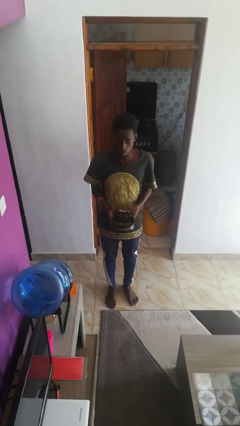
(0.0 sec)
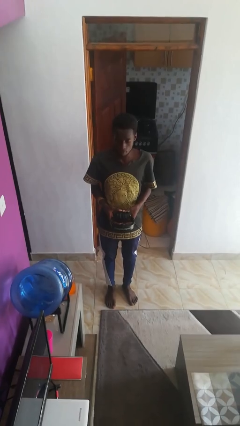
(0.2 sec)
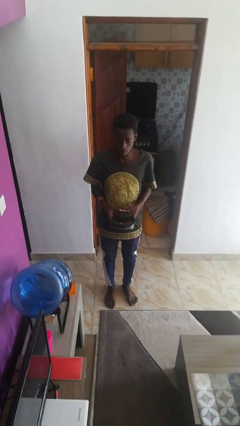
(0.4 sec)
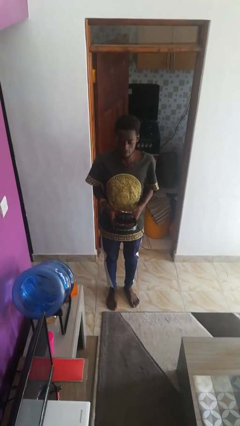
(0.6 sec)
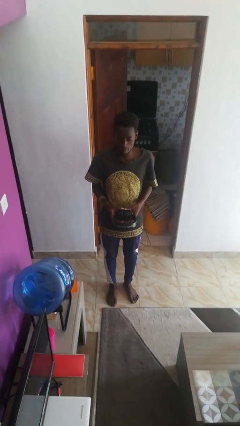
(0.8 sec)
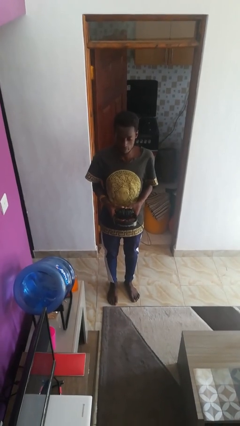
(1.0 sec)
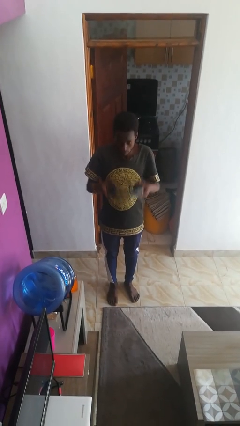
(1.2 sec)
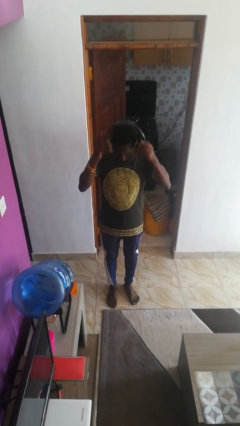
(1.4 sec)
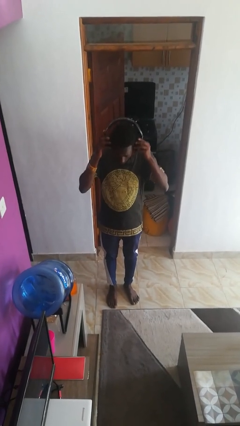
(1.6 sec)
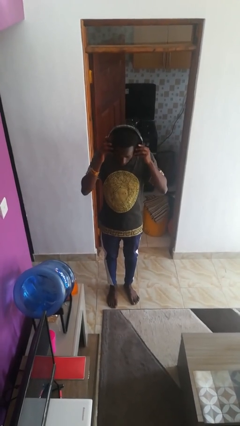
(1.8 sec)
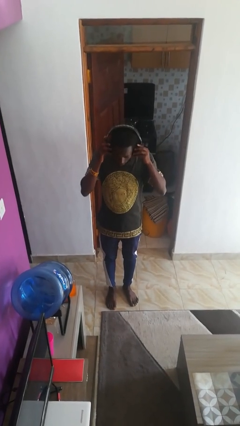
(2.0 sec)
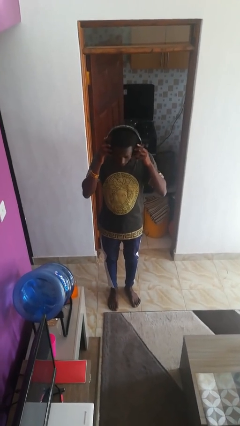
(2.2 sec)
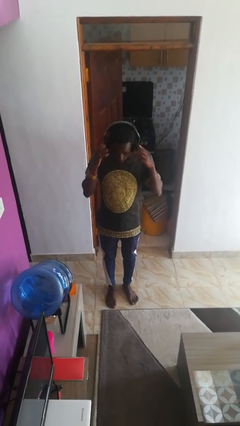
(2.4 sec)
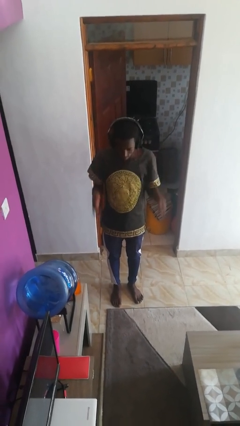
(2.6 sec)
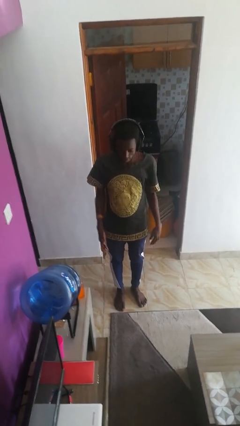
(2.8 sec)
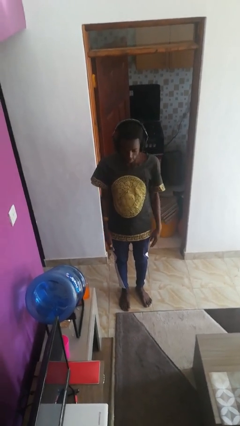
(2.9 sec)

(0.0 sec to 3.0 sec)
person puts on headphones

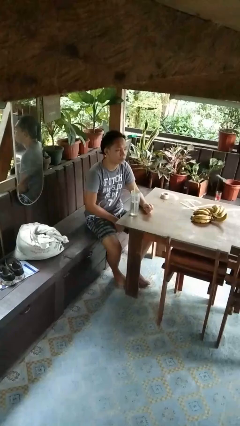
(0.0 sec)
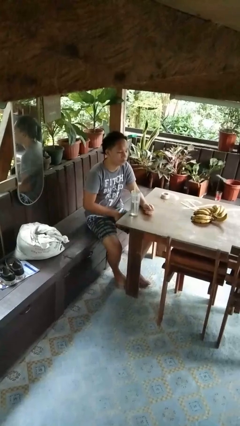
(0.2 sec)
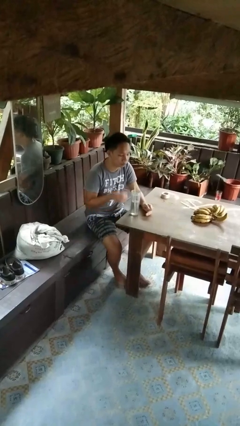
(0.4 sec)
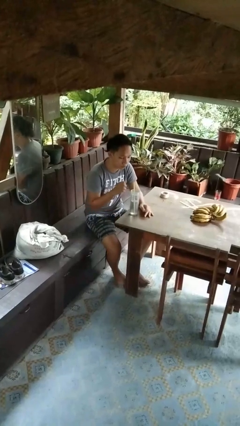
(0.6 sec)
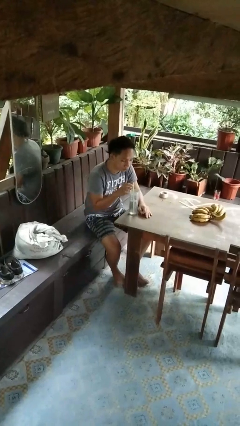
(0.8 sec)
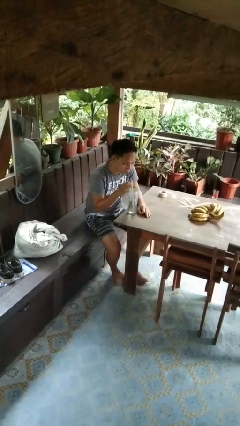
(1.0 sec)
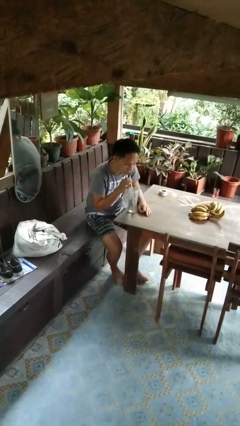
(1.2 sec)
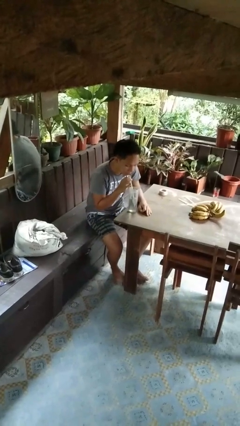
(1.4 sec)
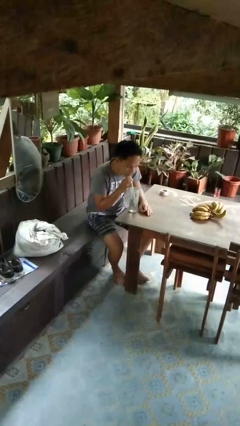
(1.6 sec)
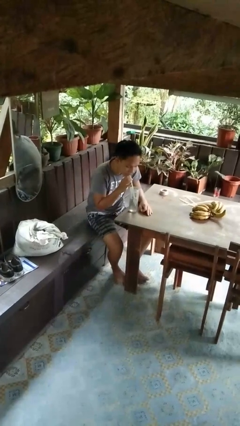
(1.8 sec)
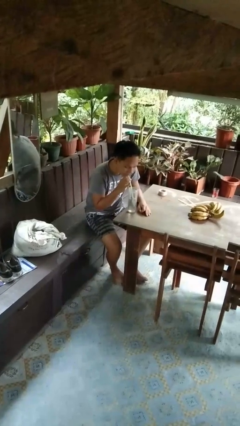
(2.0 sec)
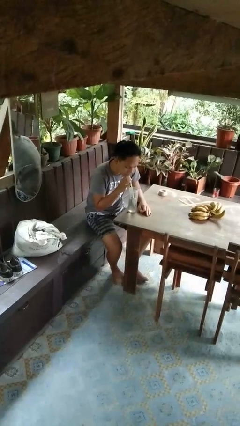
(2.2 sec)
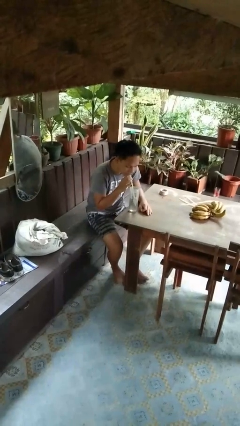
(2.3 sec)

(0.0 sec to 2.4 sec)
person drinks from straw

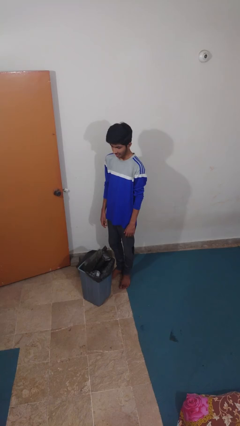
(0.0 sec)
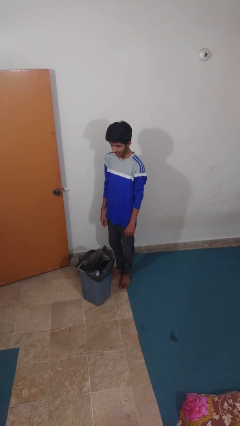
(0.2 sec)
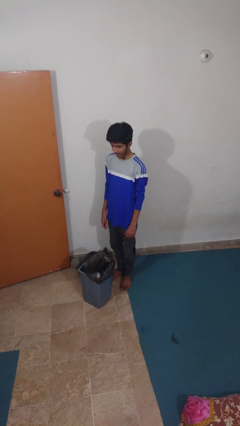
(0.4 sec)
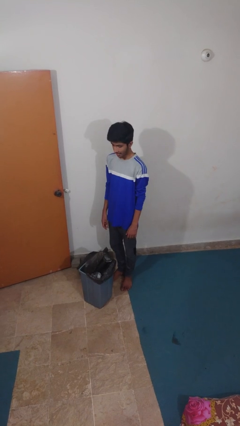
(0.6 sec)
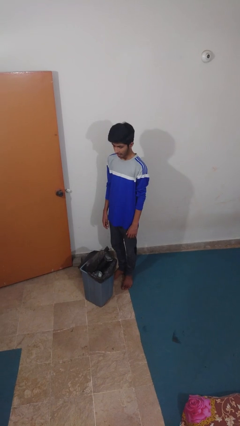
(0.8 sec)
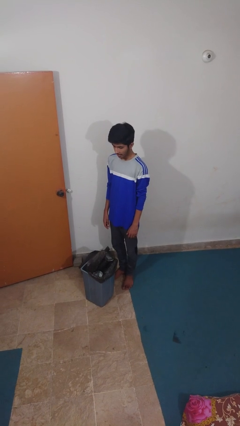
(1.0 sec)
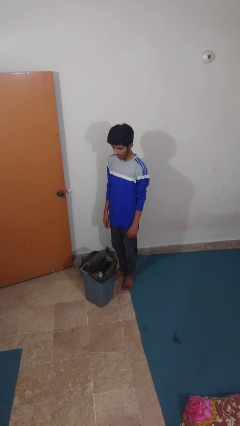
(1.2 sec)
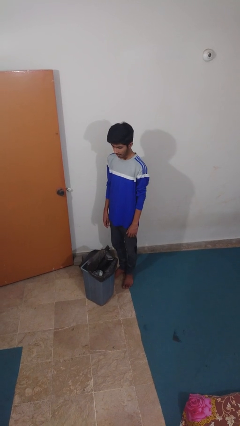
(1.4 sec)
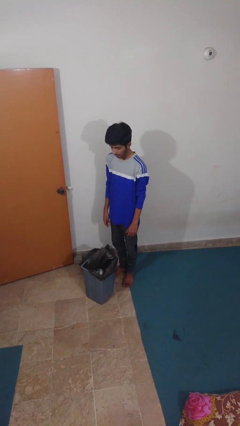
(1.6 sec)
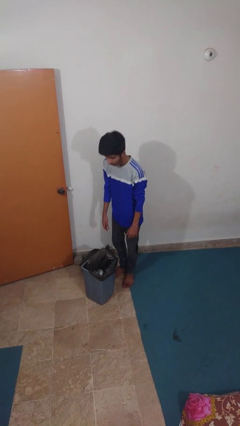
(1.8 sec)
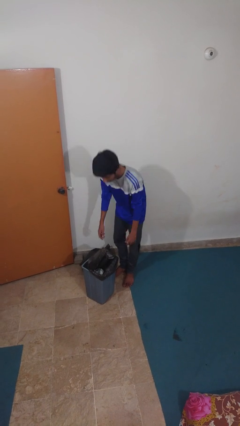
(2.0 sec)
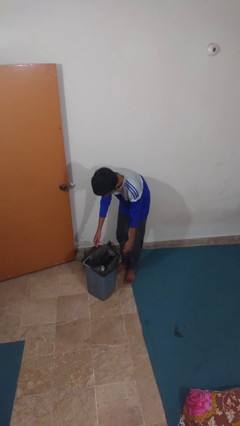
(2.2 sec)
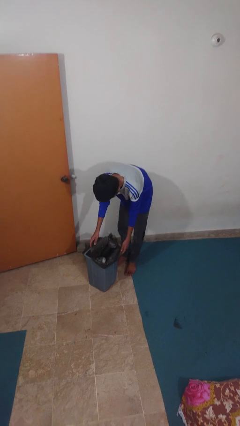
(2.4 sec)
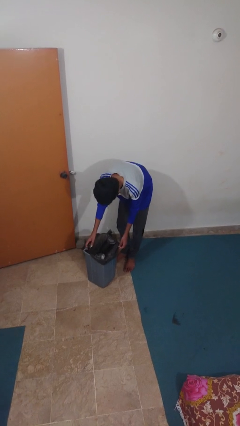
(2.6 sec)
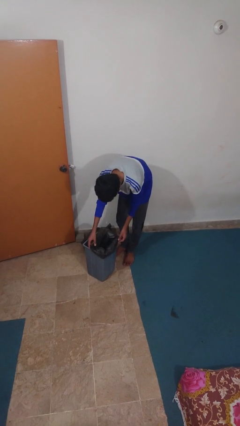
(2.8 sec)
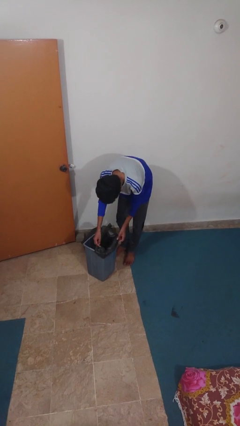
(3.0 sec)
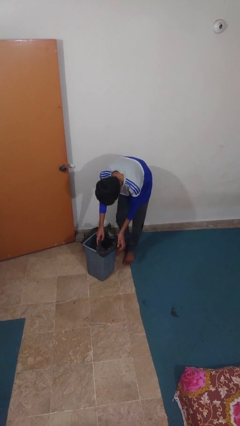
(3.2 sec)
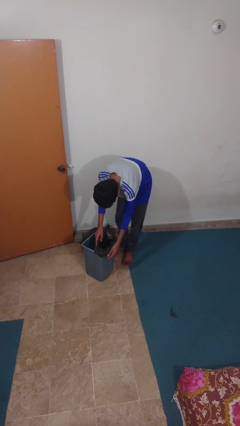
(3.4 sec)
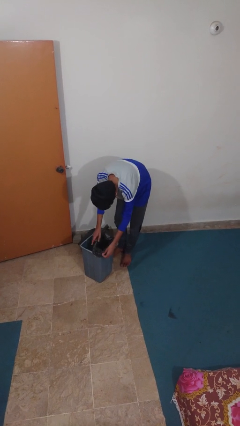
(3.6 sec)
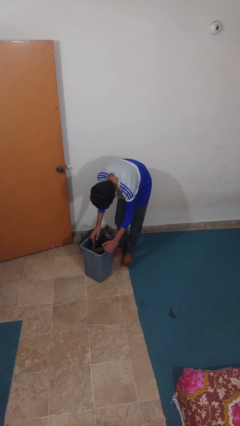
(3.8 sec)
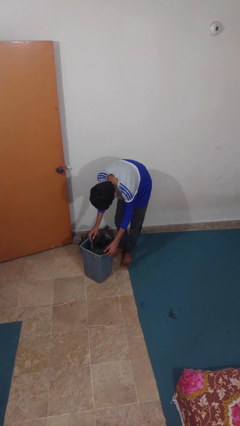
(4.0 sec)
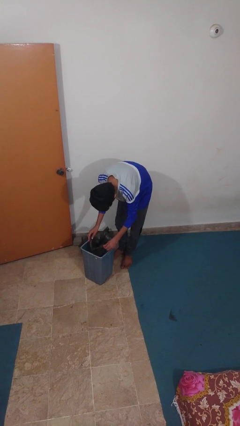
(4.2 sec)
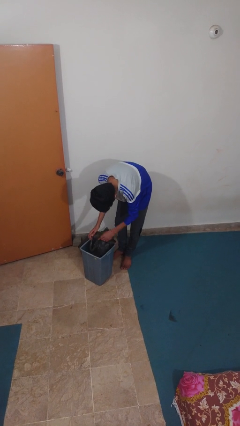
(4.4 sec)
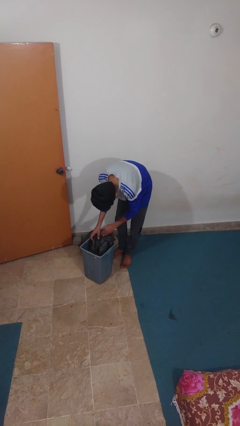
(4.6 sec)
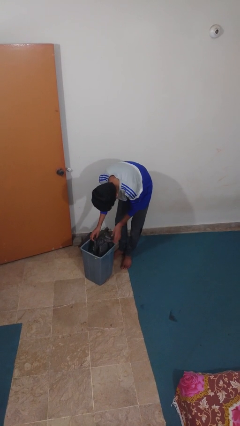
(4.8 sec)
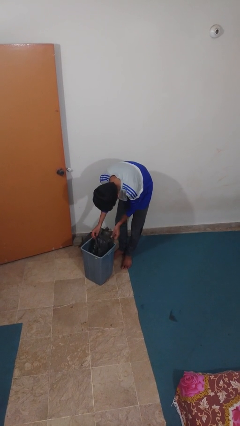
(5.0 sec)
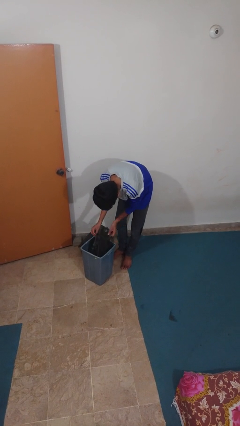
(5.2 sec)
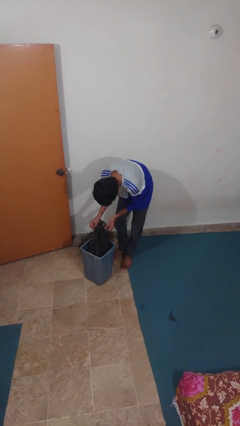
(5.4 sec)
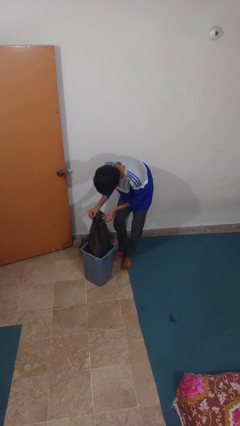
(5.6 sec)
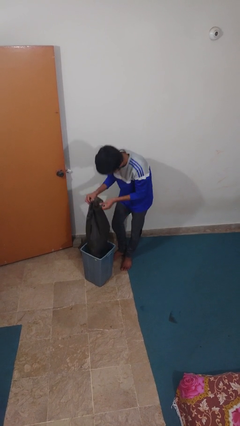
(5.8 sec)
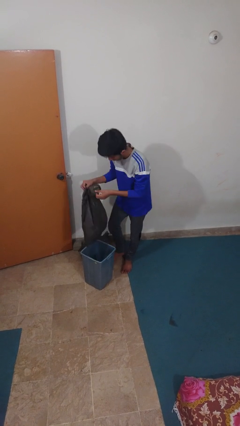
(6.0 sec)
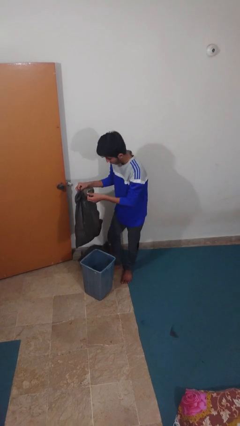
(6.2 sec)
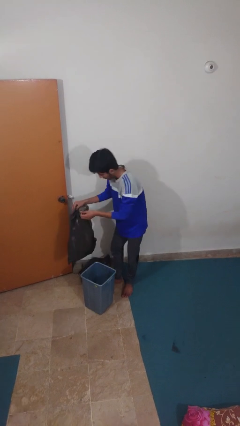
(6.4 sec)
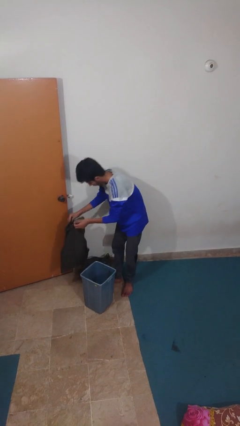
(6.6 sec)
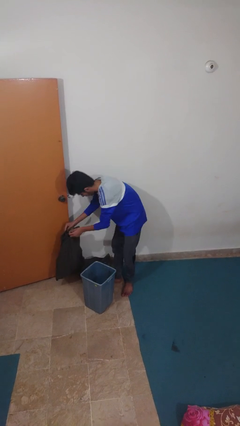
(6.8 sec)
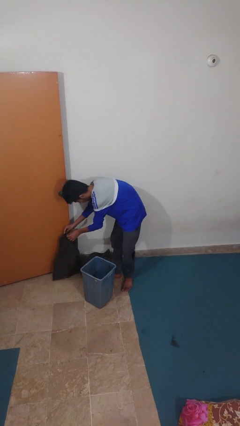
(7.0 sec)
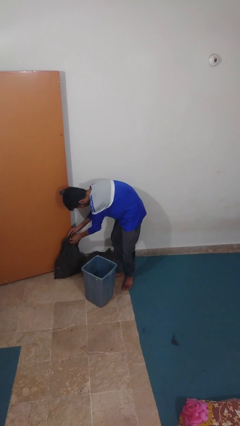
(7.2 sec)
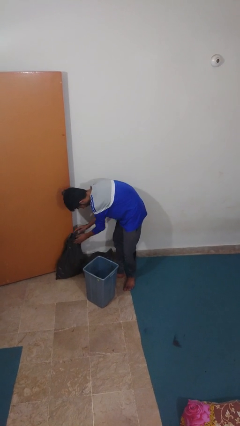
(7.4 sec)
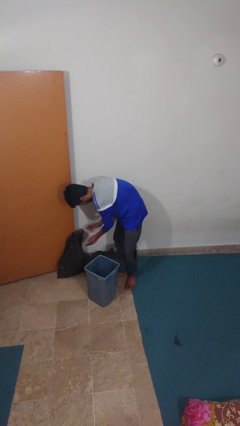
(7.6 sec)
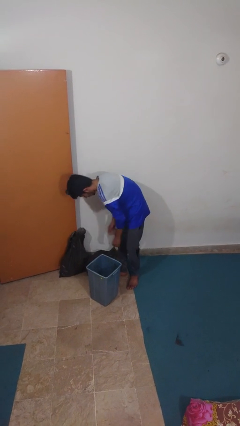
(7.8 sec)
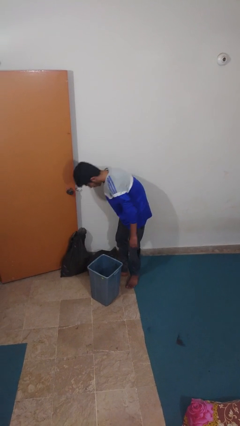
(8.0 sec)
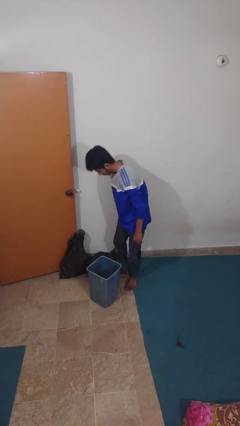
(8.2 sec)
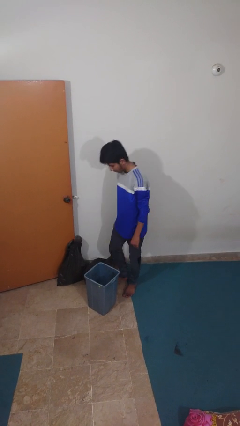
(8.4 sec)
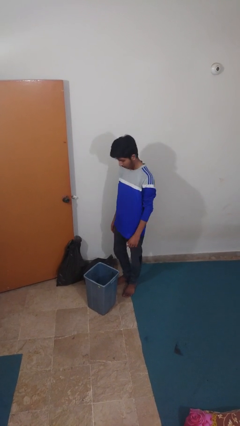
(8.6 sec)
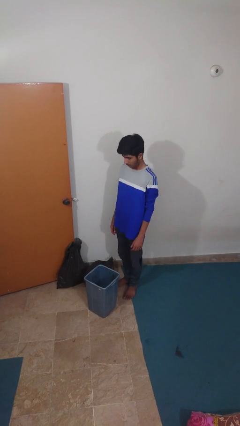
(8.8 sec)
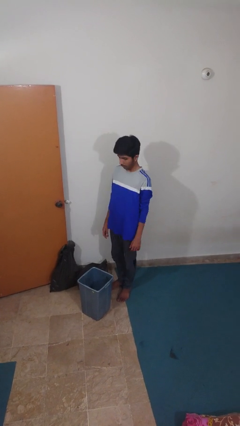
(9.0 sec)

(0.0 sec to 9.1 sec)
person removes trashbag from trashcan

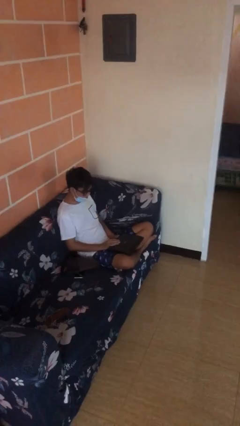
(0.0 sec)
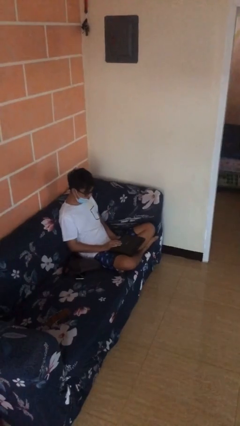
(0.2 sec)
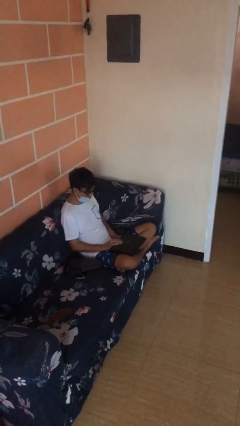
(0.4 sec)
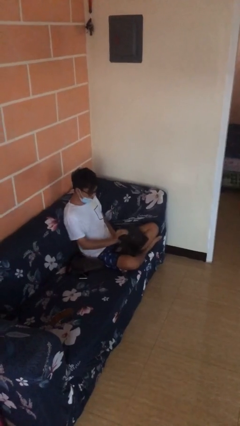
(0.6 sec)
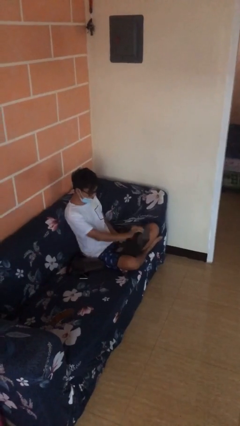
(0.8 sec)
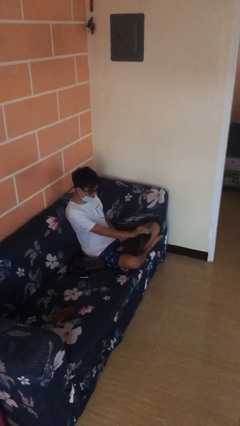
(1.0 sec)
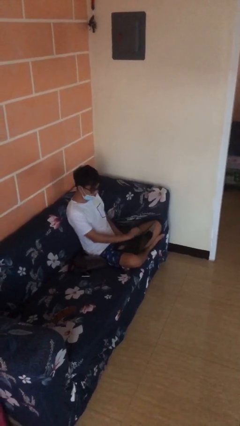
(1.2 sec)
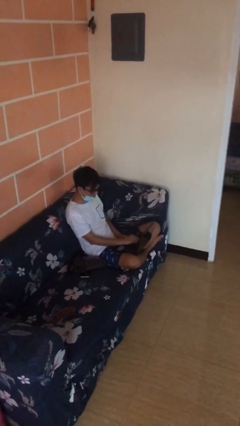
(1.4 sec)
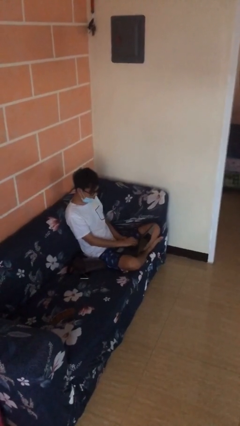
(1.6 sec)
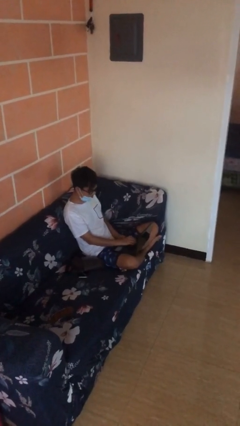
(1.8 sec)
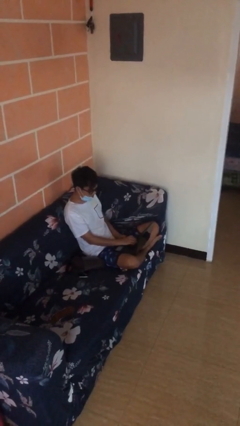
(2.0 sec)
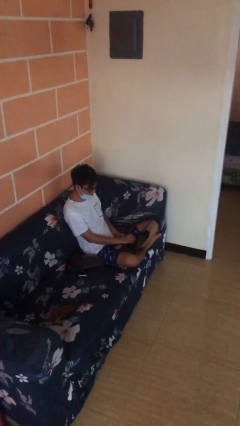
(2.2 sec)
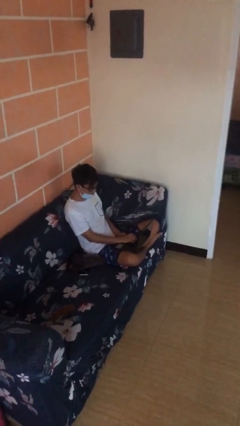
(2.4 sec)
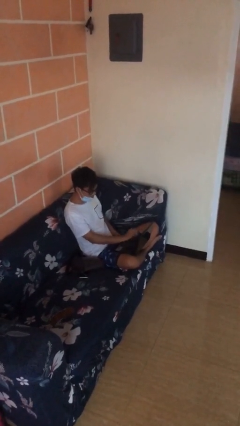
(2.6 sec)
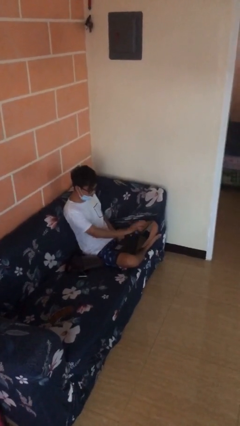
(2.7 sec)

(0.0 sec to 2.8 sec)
person interacts with laptop
